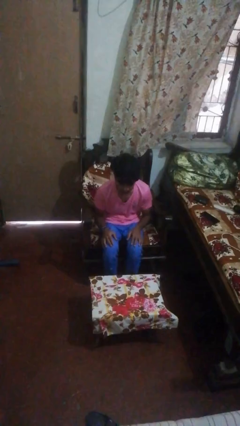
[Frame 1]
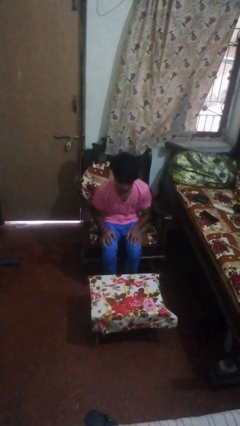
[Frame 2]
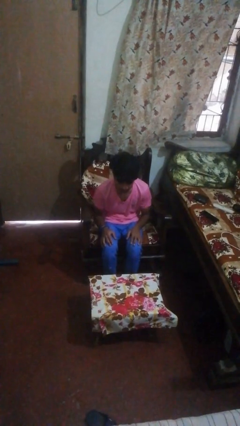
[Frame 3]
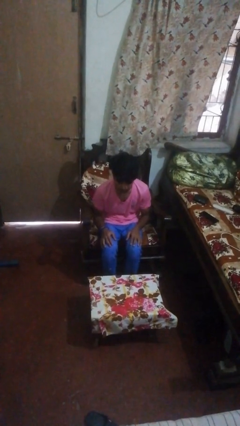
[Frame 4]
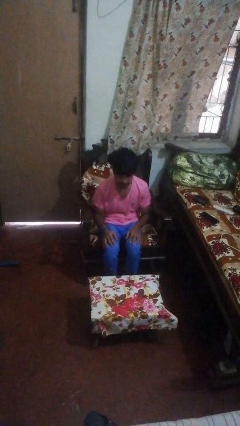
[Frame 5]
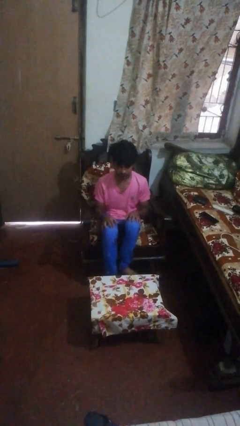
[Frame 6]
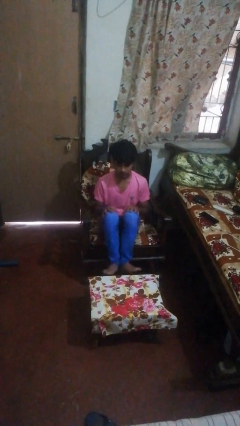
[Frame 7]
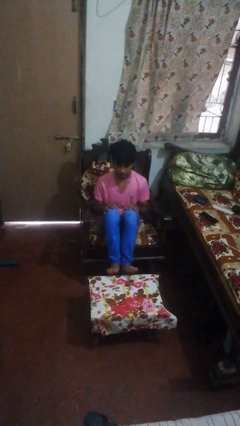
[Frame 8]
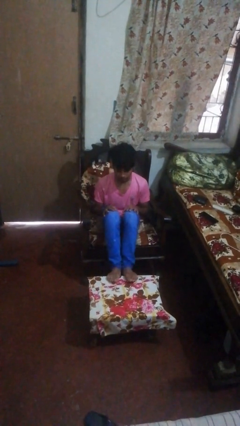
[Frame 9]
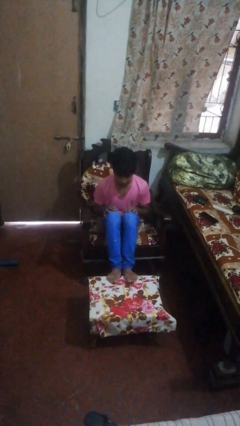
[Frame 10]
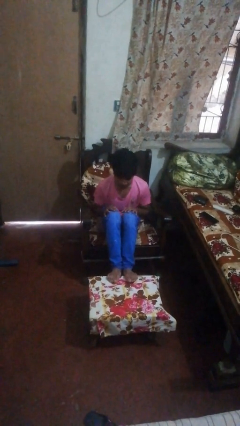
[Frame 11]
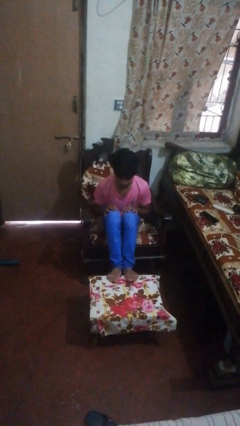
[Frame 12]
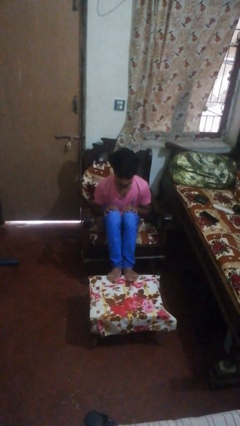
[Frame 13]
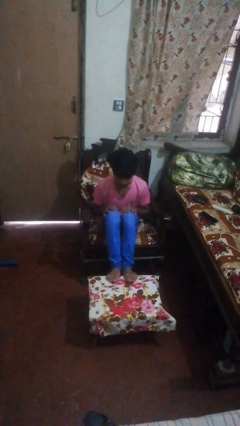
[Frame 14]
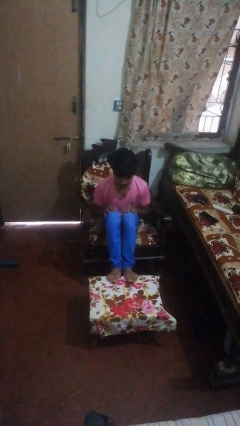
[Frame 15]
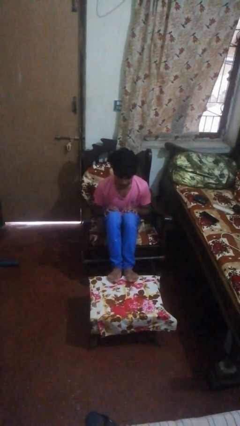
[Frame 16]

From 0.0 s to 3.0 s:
person puts feet up

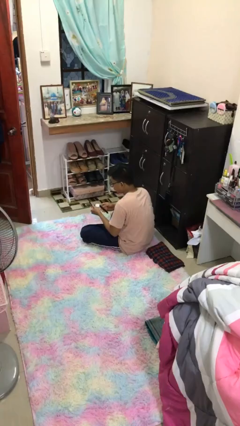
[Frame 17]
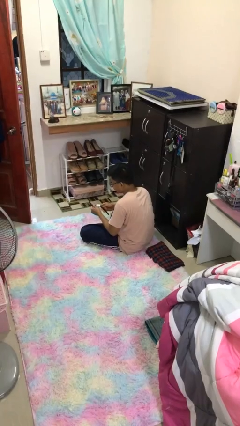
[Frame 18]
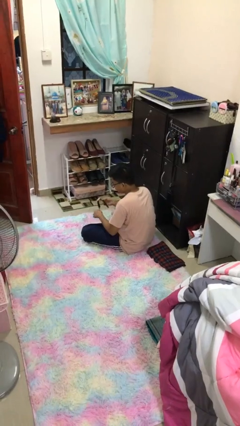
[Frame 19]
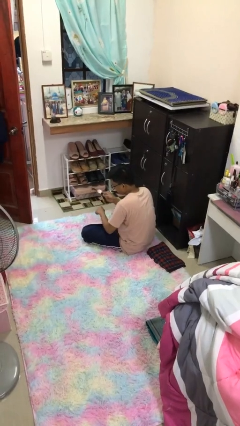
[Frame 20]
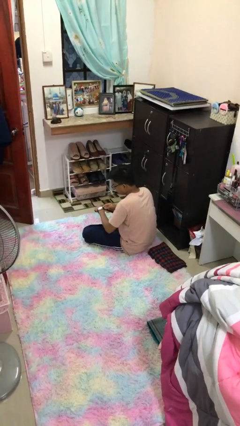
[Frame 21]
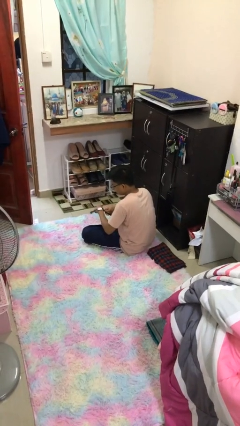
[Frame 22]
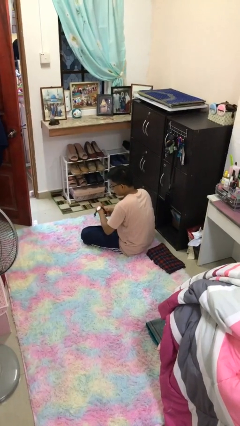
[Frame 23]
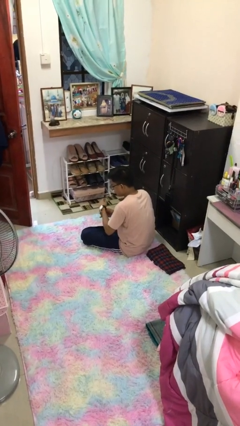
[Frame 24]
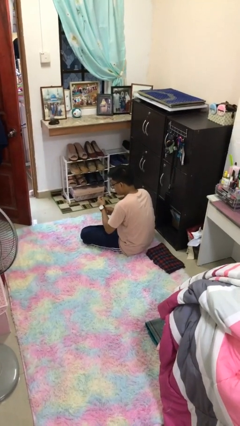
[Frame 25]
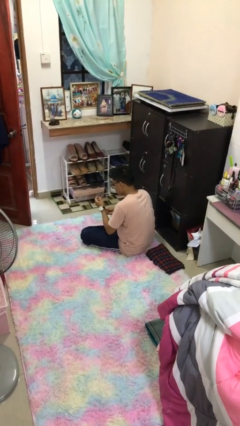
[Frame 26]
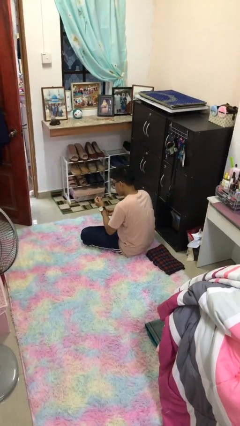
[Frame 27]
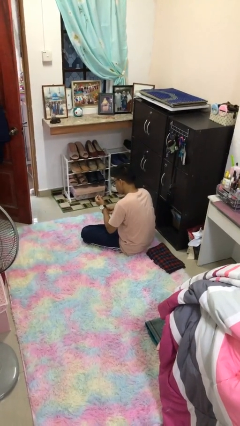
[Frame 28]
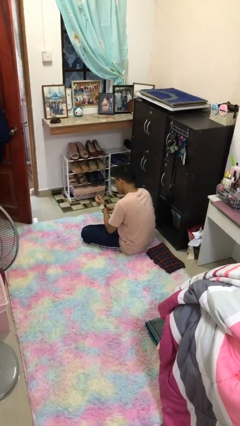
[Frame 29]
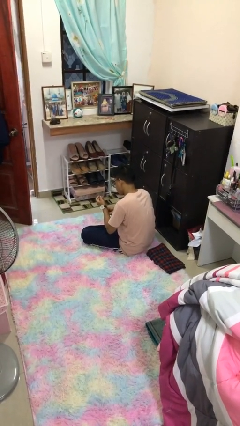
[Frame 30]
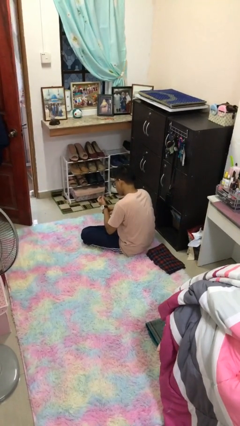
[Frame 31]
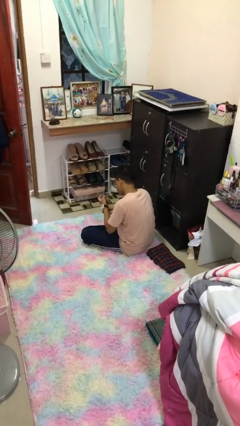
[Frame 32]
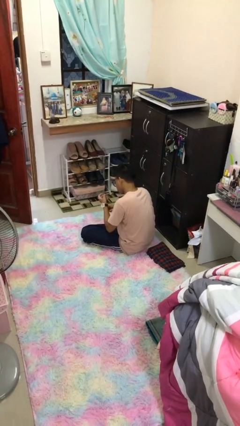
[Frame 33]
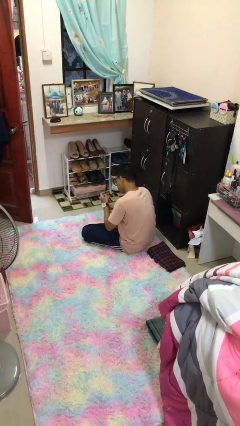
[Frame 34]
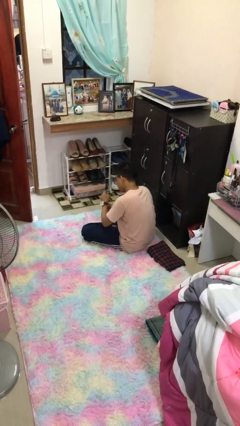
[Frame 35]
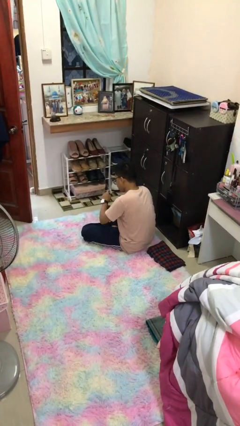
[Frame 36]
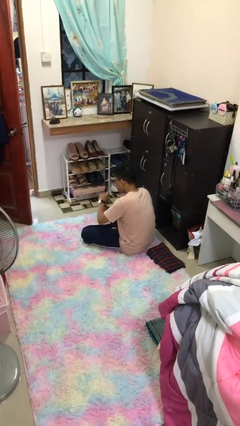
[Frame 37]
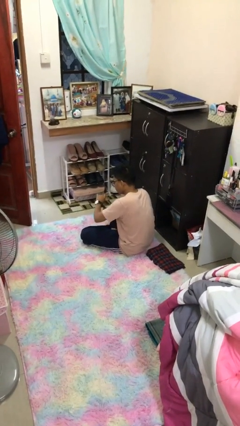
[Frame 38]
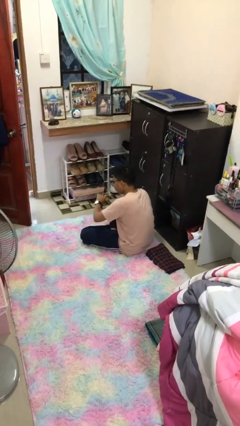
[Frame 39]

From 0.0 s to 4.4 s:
person puts on wristwatch

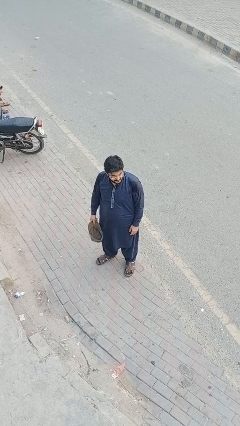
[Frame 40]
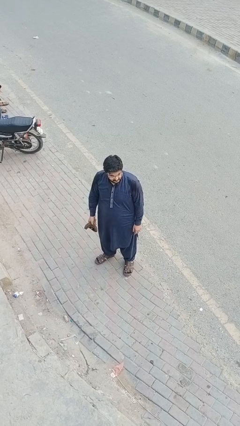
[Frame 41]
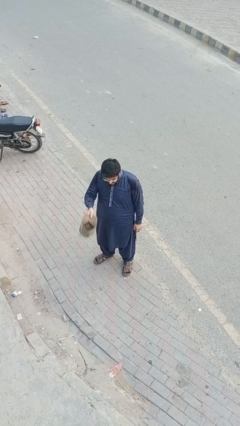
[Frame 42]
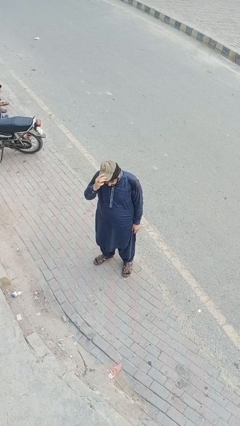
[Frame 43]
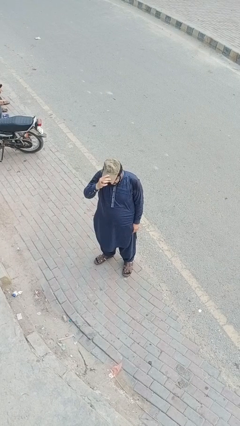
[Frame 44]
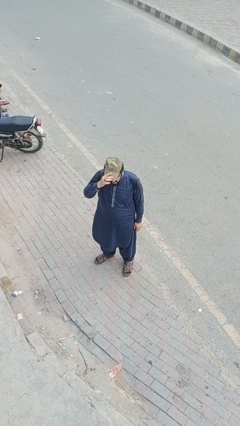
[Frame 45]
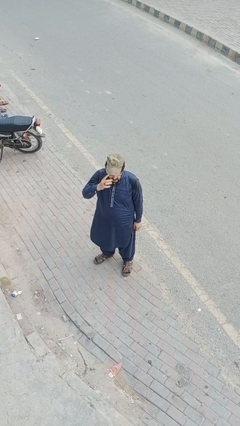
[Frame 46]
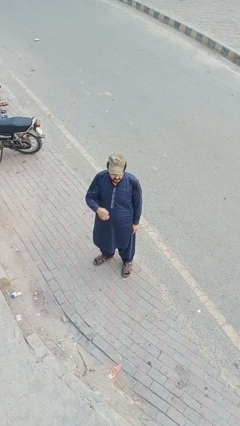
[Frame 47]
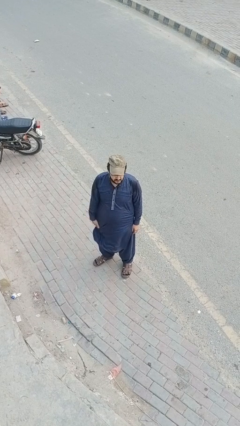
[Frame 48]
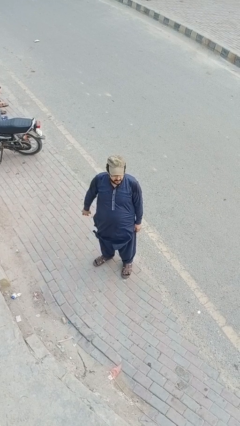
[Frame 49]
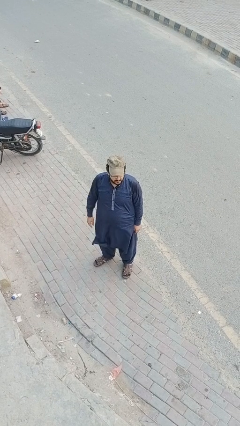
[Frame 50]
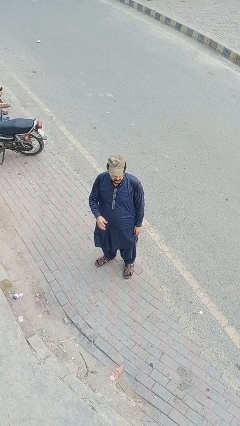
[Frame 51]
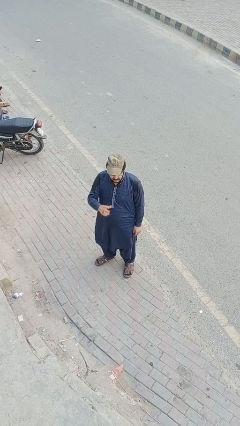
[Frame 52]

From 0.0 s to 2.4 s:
person puts on hat

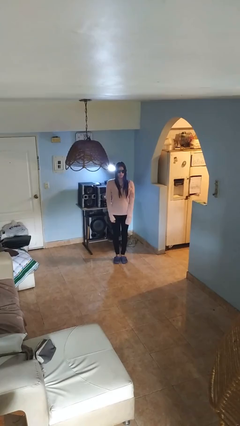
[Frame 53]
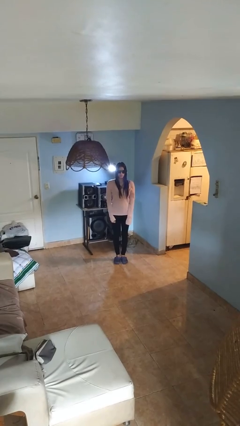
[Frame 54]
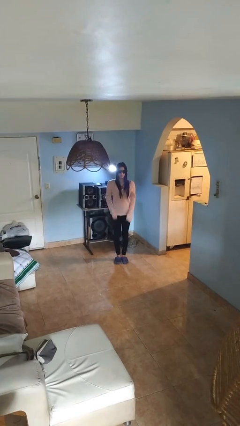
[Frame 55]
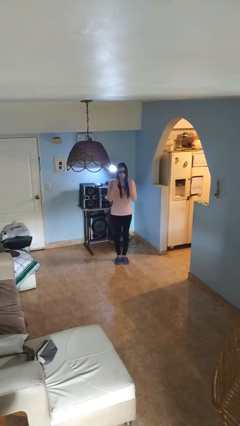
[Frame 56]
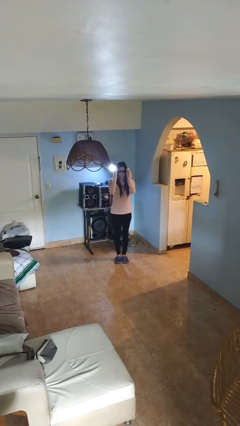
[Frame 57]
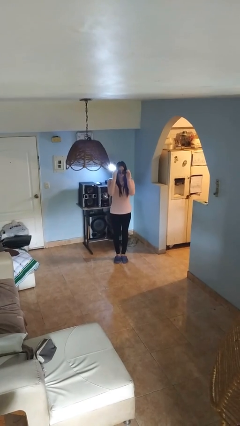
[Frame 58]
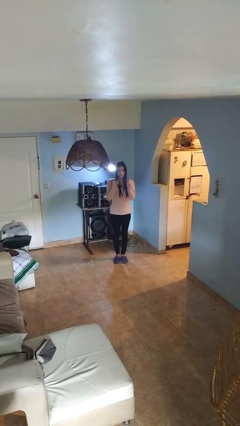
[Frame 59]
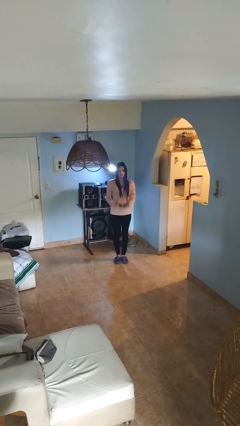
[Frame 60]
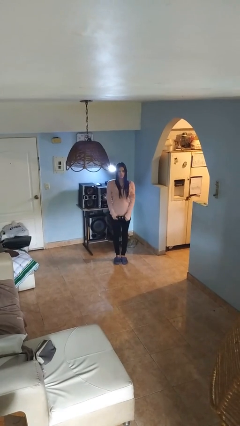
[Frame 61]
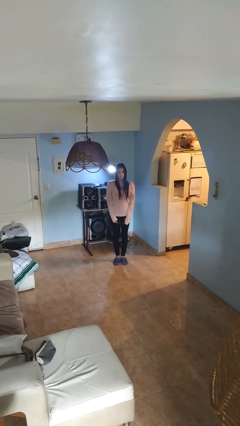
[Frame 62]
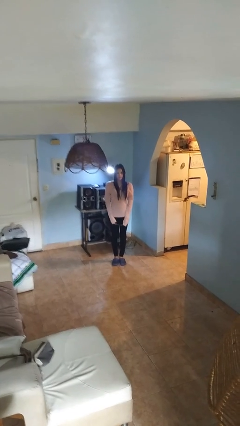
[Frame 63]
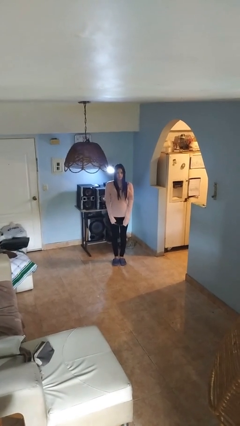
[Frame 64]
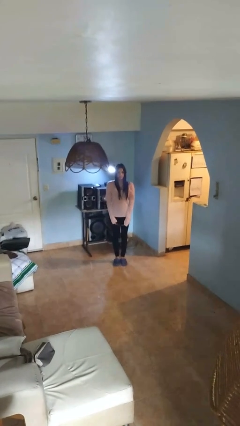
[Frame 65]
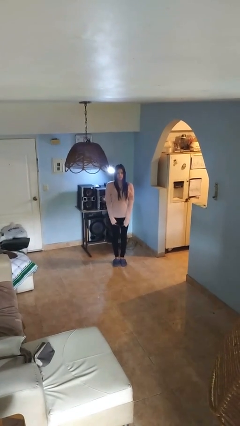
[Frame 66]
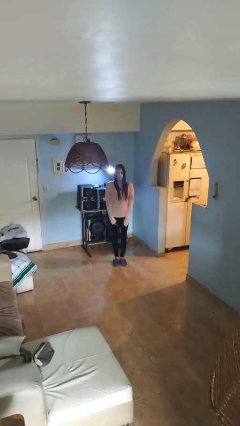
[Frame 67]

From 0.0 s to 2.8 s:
person takes off sunglasses

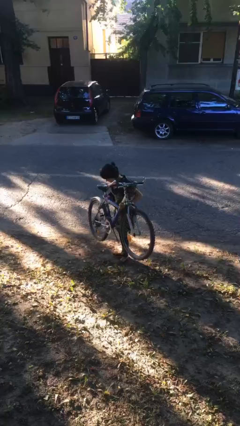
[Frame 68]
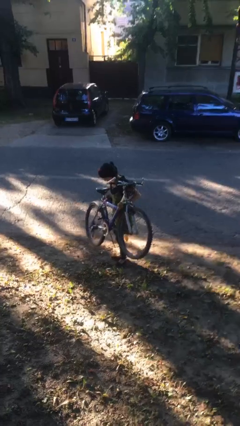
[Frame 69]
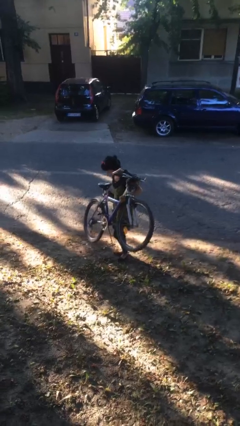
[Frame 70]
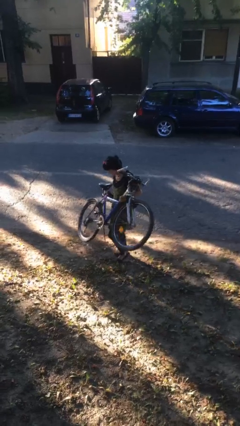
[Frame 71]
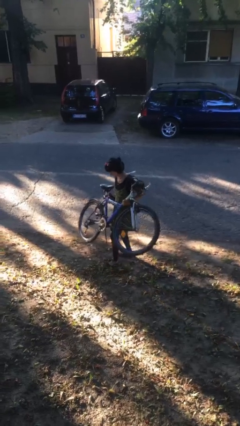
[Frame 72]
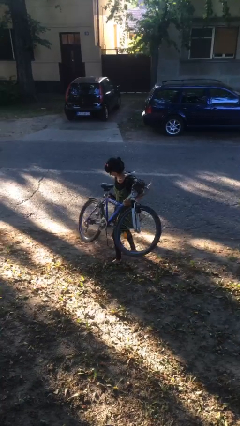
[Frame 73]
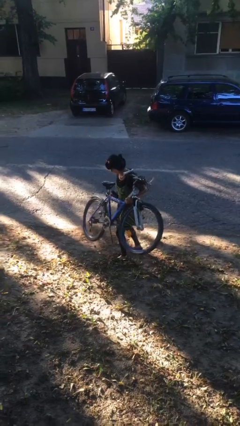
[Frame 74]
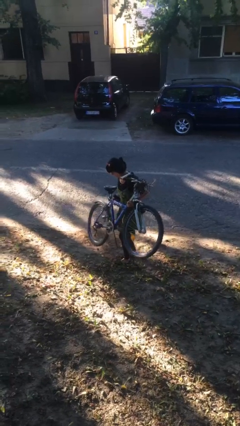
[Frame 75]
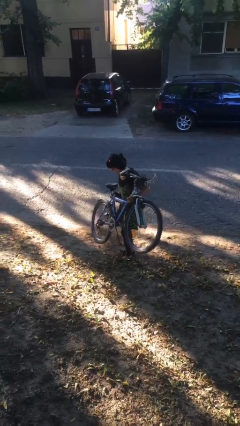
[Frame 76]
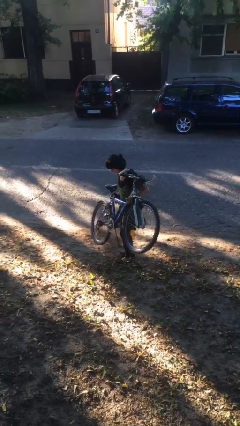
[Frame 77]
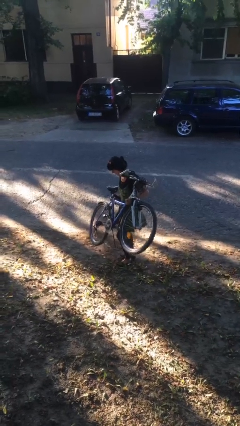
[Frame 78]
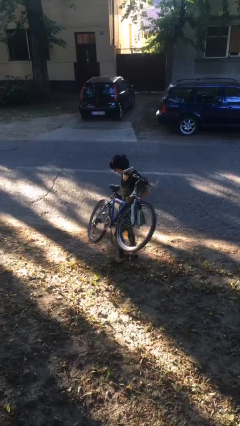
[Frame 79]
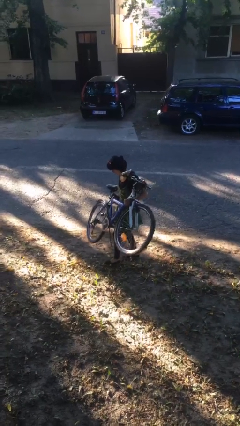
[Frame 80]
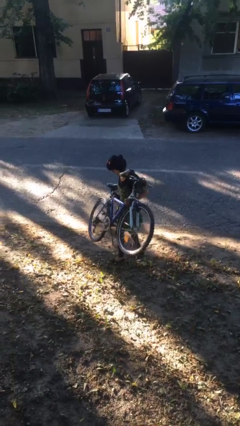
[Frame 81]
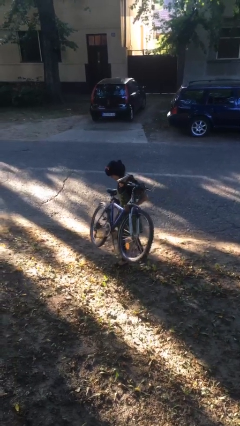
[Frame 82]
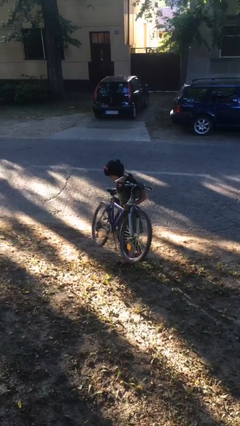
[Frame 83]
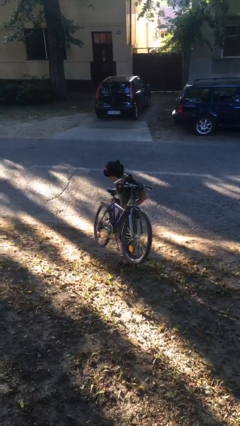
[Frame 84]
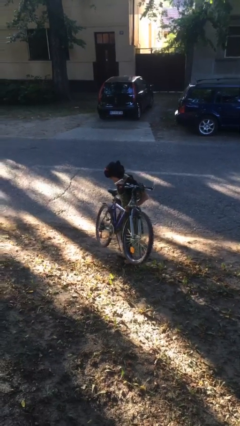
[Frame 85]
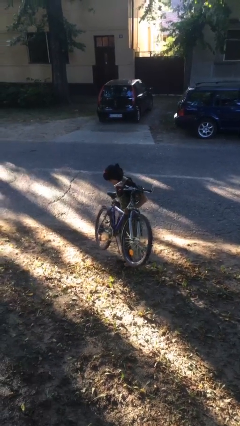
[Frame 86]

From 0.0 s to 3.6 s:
person carries heavy object

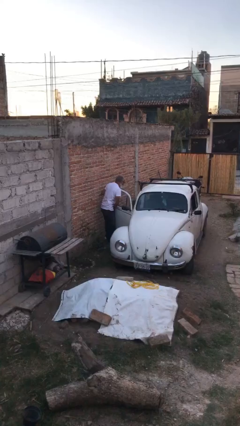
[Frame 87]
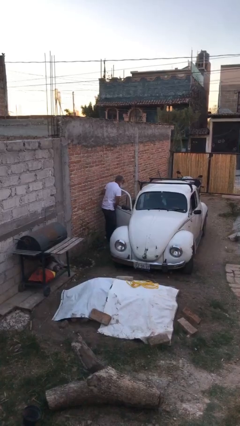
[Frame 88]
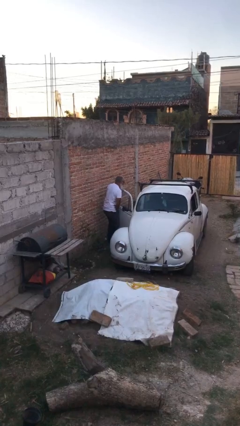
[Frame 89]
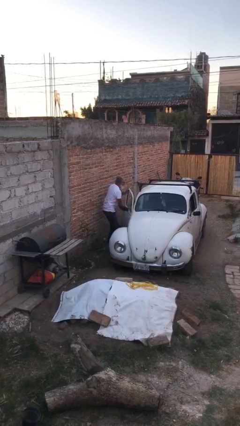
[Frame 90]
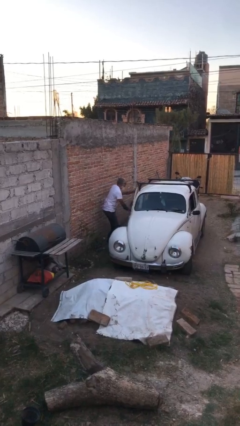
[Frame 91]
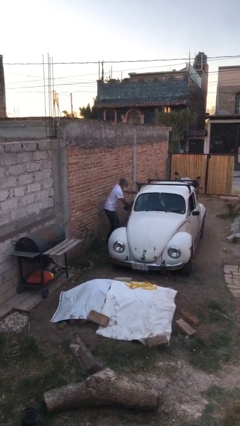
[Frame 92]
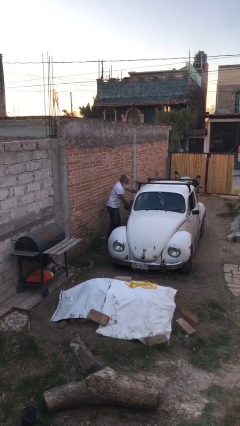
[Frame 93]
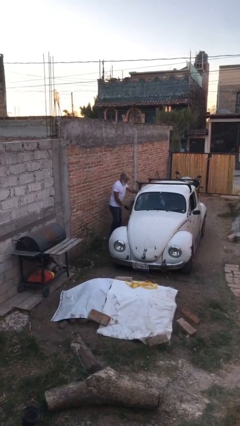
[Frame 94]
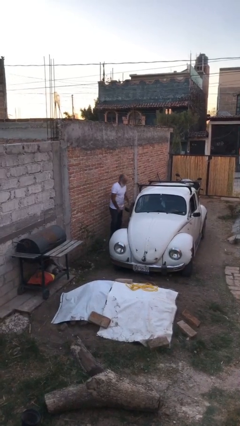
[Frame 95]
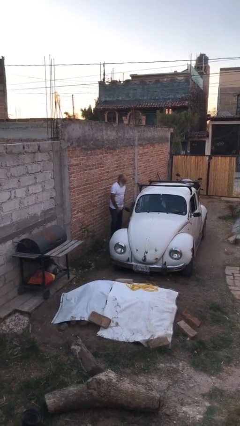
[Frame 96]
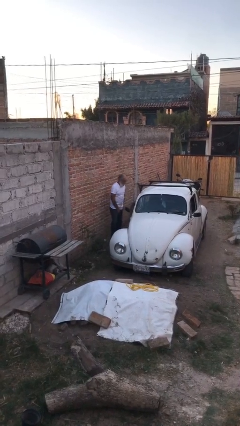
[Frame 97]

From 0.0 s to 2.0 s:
person closes car door
